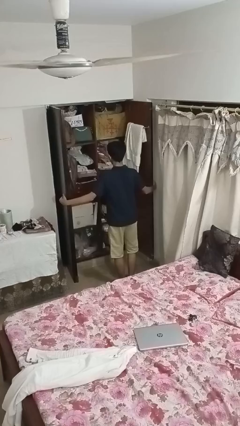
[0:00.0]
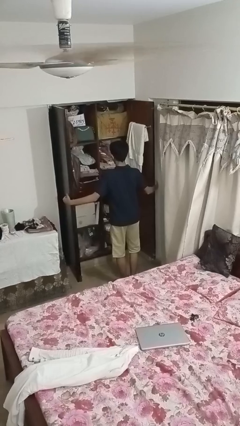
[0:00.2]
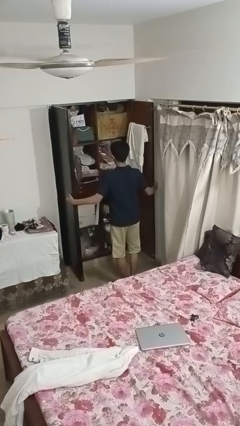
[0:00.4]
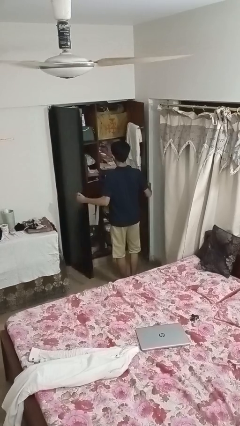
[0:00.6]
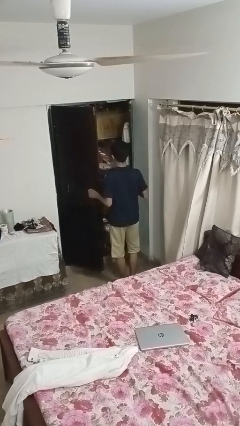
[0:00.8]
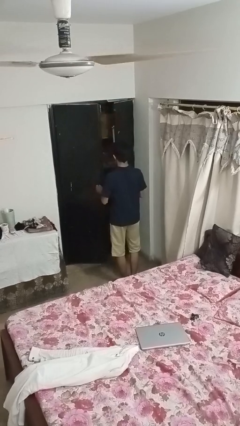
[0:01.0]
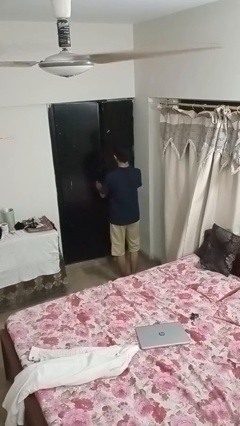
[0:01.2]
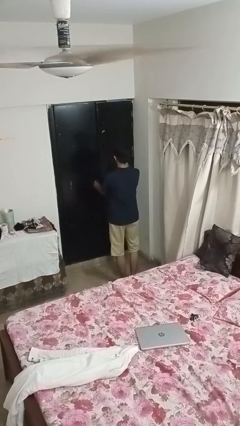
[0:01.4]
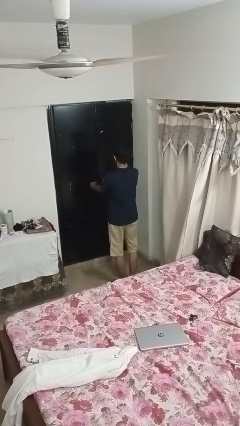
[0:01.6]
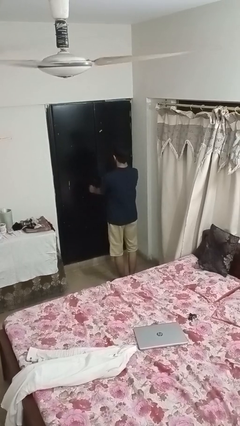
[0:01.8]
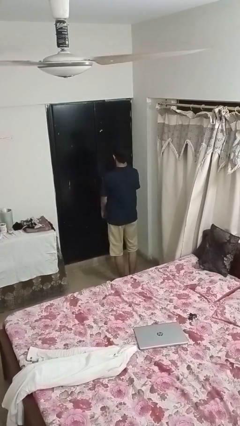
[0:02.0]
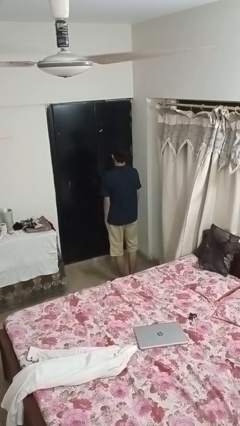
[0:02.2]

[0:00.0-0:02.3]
person closes closet door

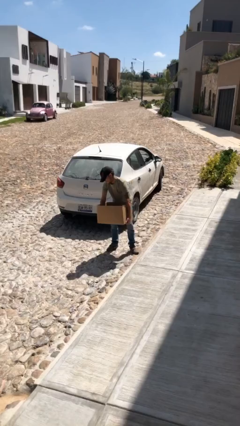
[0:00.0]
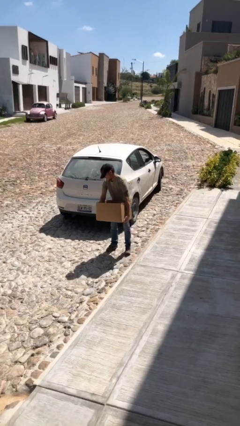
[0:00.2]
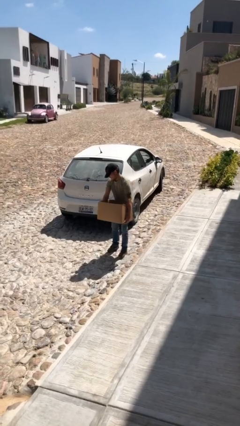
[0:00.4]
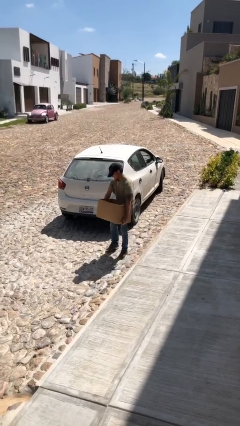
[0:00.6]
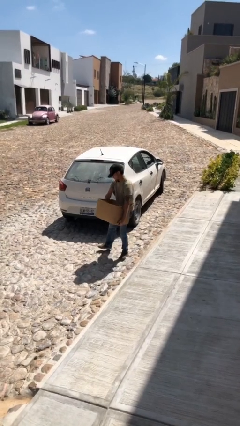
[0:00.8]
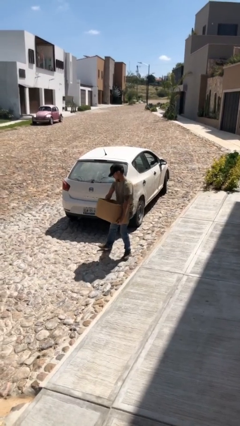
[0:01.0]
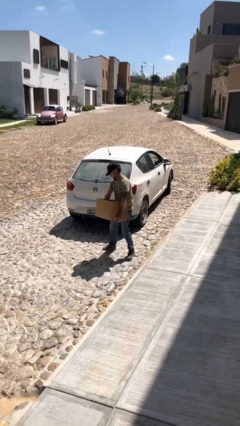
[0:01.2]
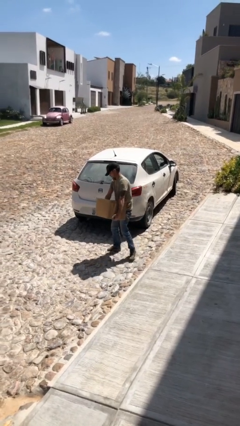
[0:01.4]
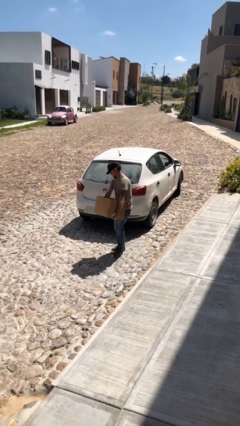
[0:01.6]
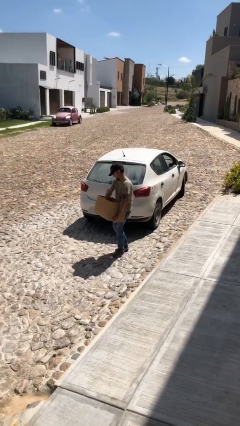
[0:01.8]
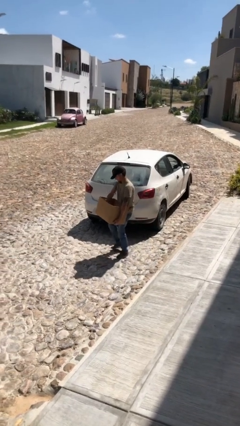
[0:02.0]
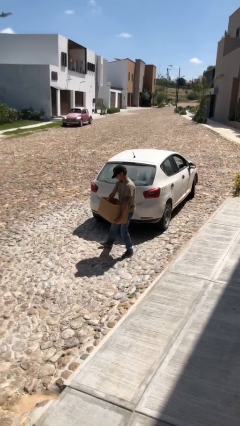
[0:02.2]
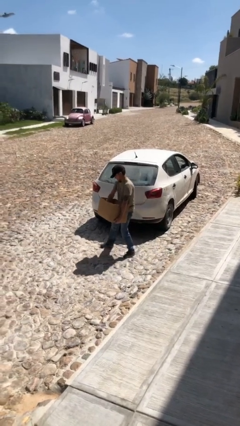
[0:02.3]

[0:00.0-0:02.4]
person carries heavy object

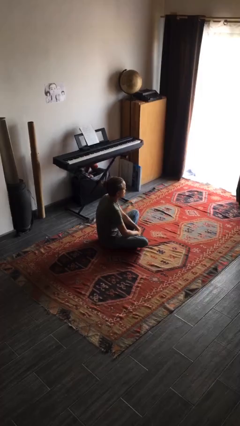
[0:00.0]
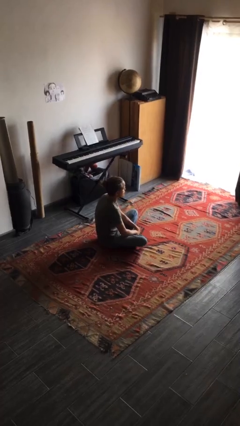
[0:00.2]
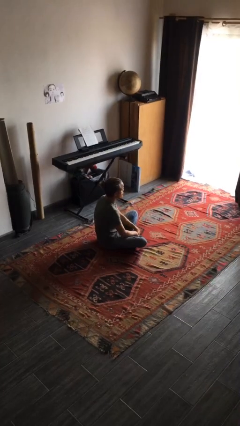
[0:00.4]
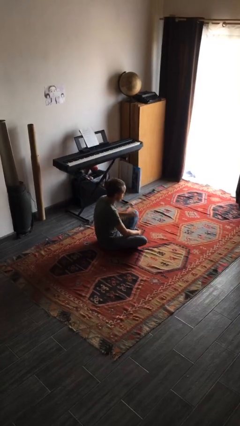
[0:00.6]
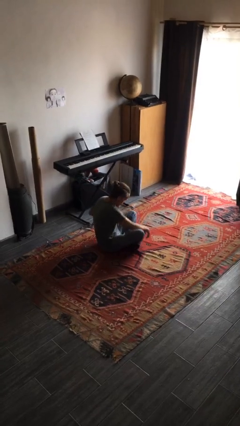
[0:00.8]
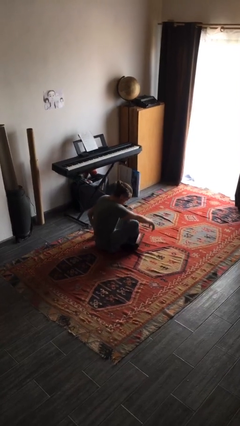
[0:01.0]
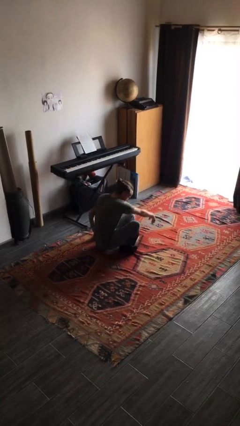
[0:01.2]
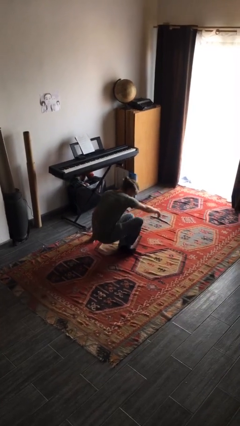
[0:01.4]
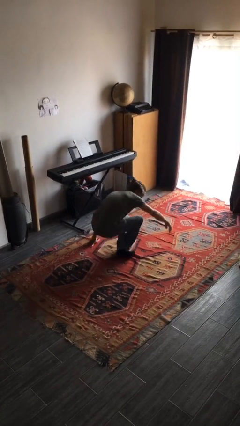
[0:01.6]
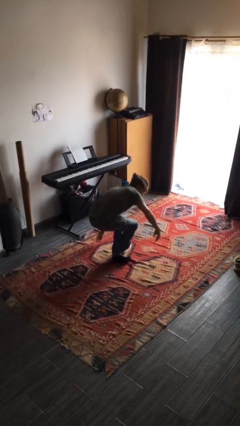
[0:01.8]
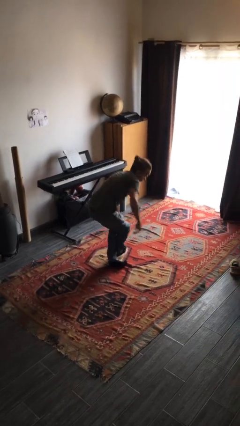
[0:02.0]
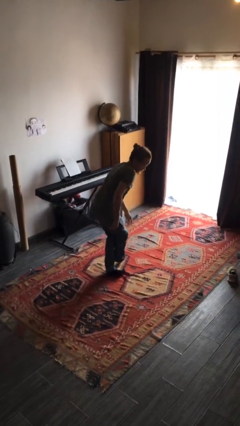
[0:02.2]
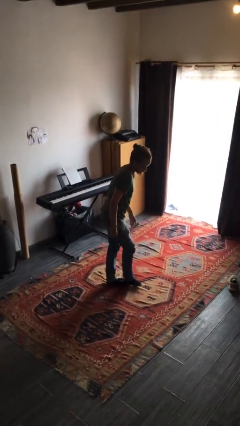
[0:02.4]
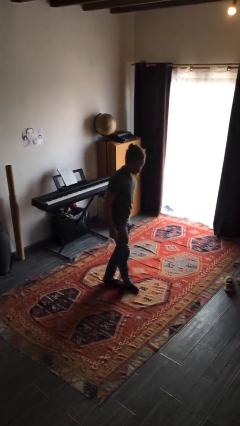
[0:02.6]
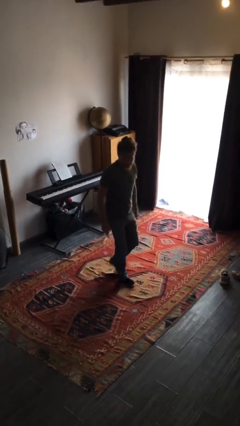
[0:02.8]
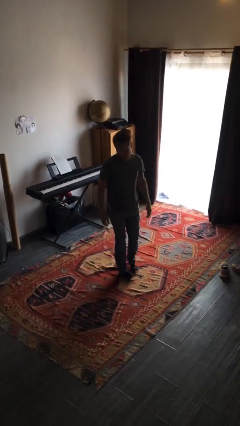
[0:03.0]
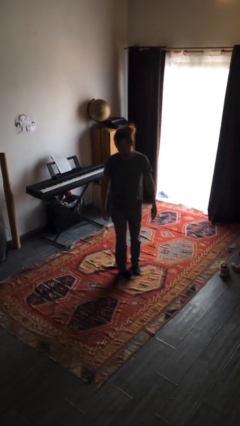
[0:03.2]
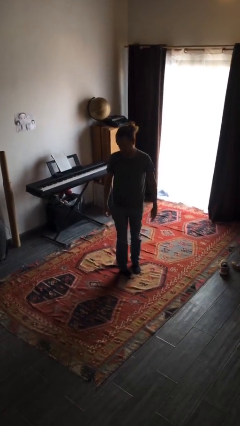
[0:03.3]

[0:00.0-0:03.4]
person stands up from floor

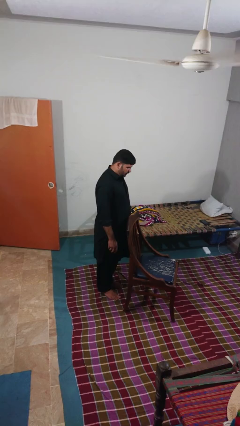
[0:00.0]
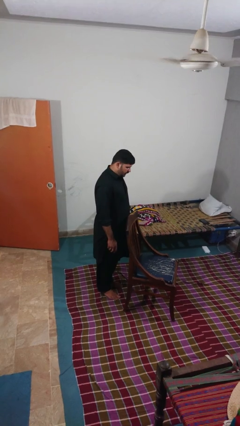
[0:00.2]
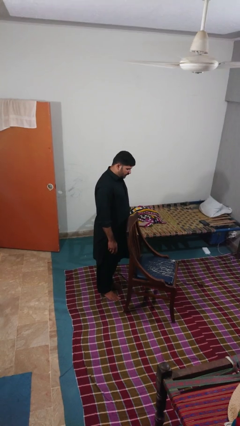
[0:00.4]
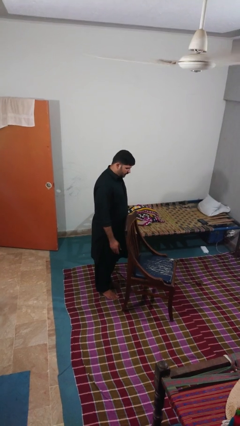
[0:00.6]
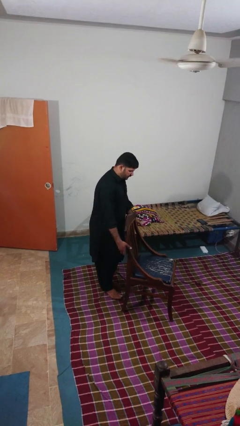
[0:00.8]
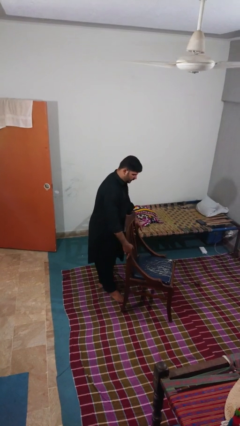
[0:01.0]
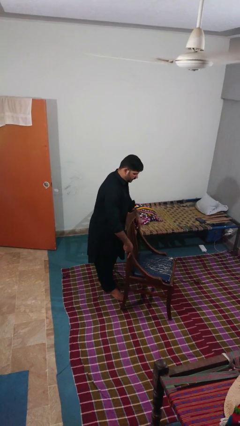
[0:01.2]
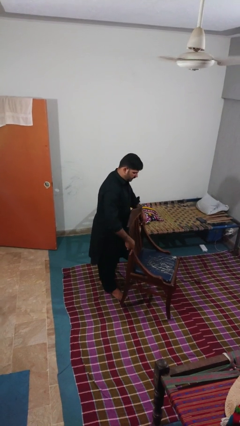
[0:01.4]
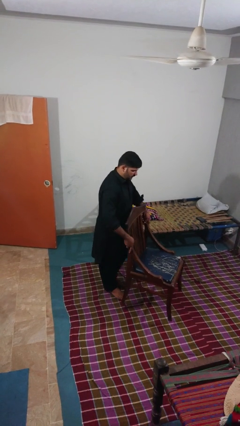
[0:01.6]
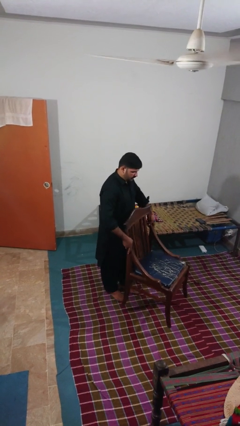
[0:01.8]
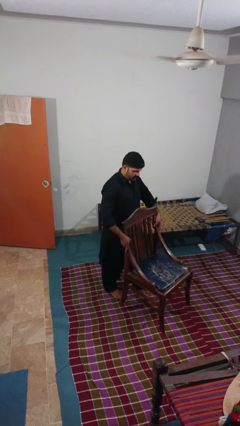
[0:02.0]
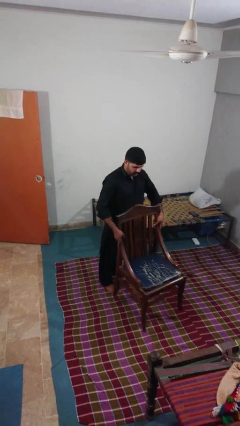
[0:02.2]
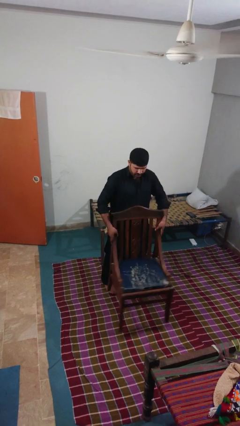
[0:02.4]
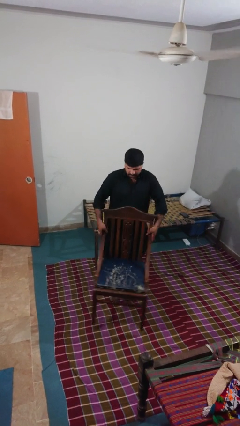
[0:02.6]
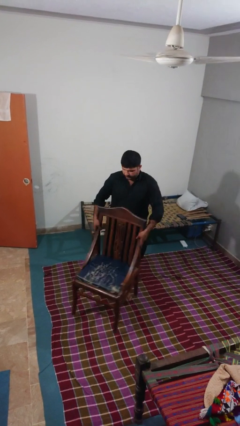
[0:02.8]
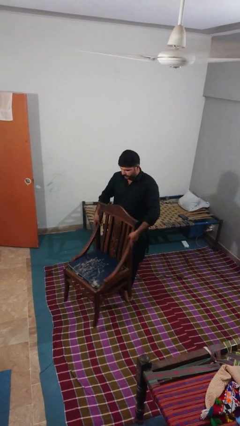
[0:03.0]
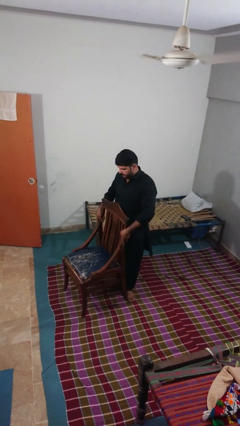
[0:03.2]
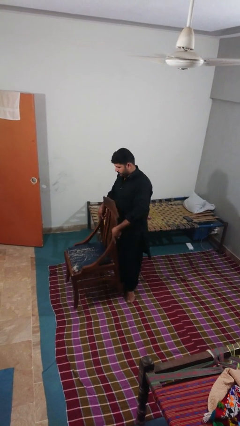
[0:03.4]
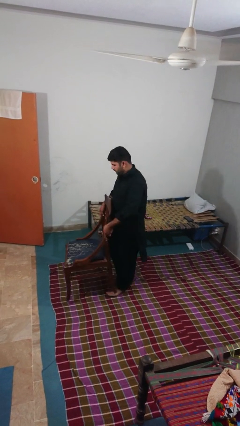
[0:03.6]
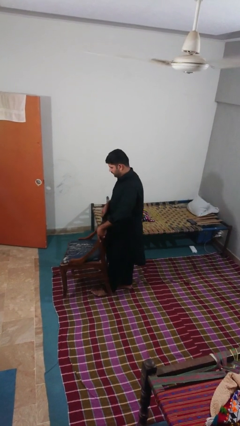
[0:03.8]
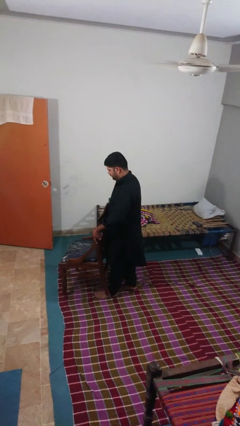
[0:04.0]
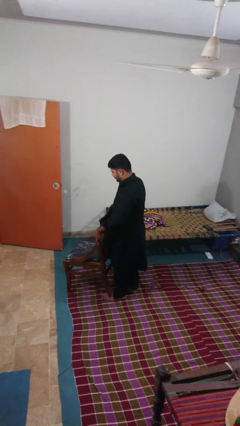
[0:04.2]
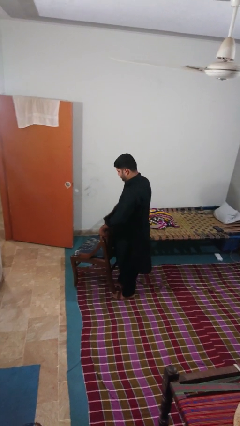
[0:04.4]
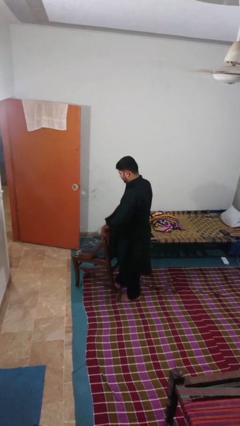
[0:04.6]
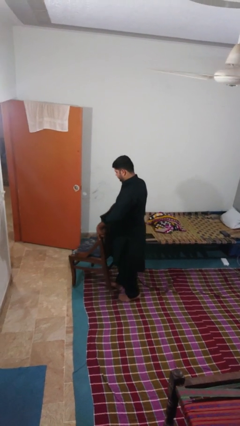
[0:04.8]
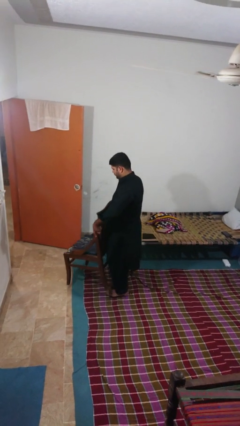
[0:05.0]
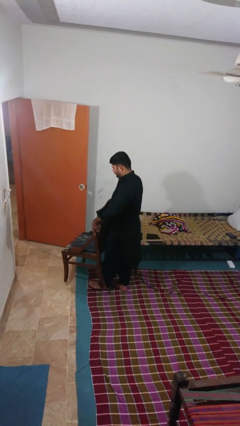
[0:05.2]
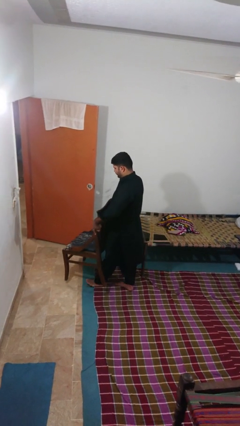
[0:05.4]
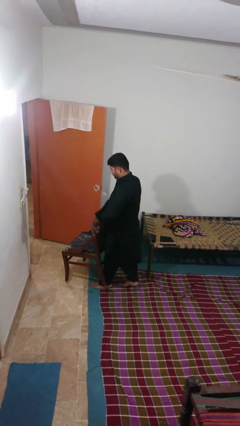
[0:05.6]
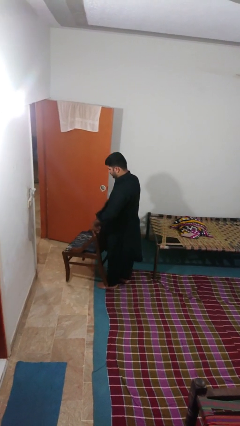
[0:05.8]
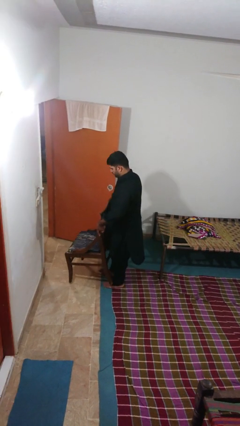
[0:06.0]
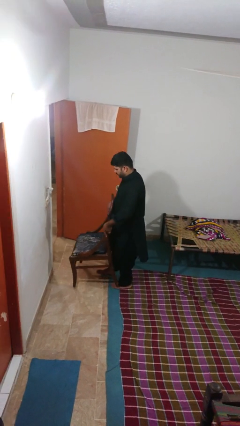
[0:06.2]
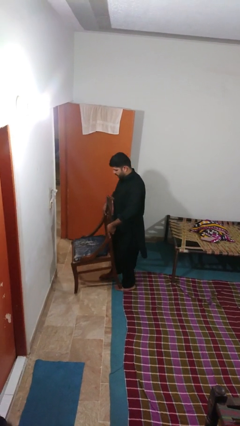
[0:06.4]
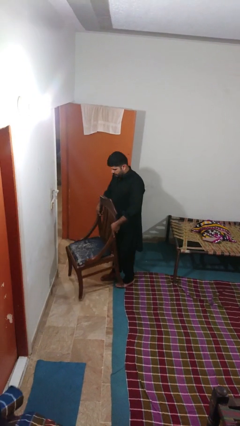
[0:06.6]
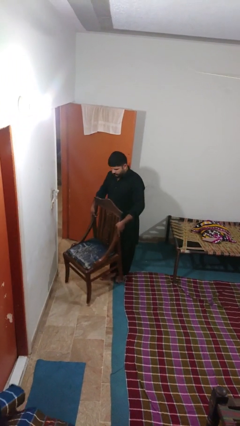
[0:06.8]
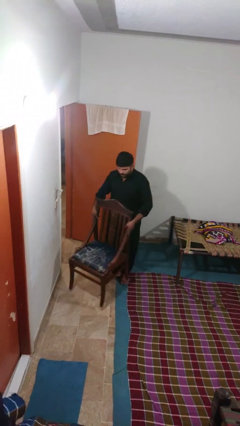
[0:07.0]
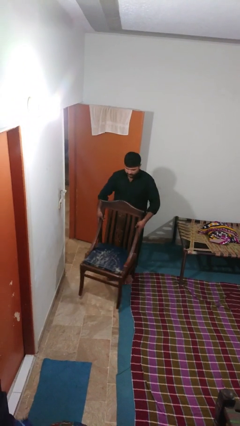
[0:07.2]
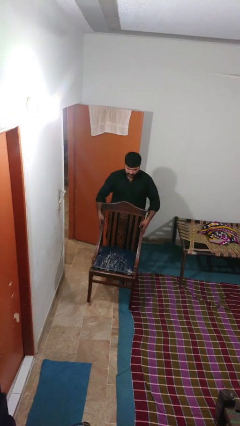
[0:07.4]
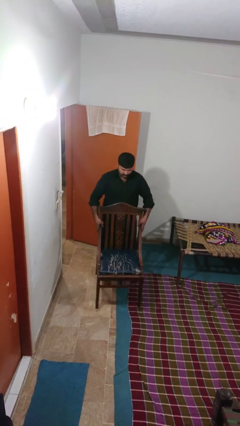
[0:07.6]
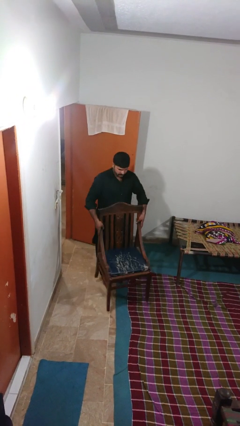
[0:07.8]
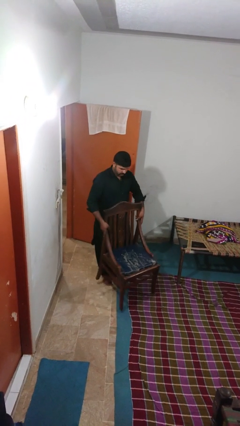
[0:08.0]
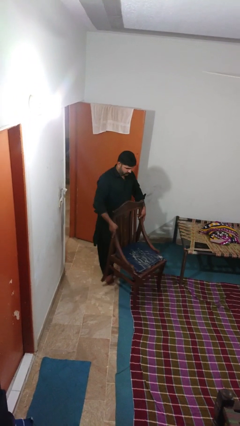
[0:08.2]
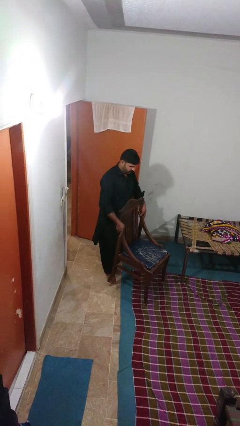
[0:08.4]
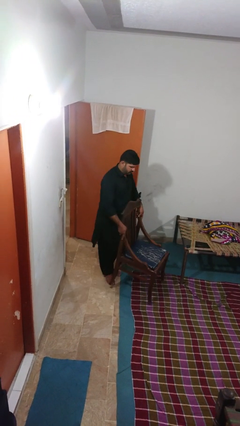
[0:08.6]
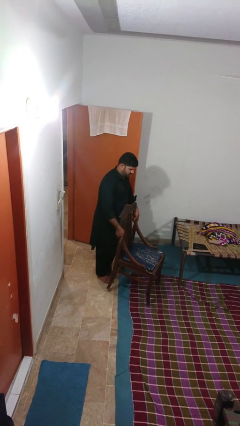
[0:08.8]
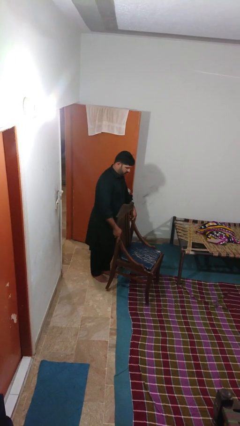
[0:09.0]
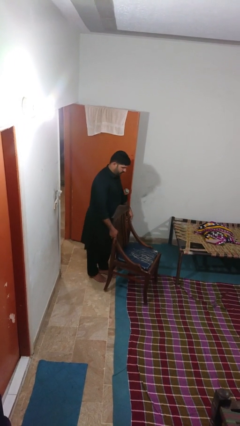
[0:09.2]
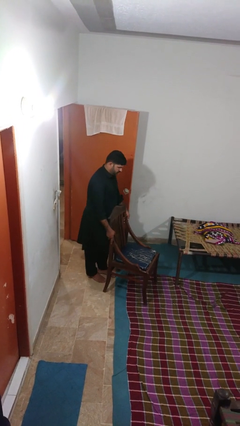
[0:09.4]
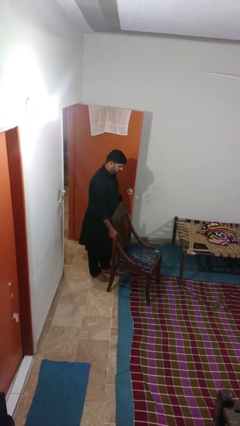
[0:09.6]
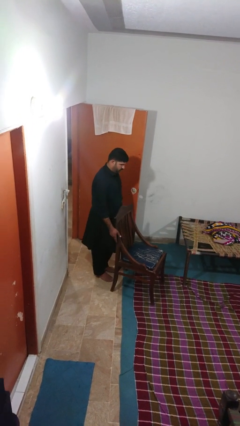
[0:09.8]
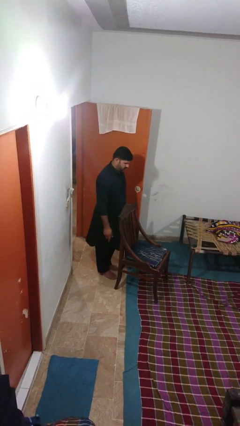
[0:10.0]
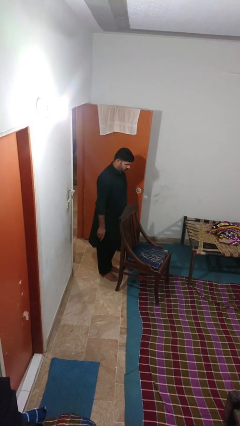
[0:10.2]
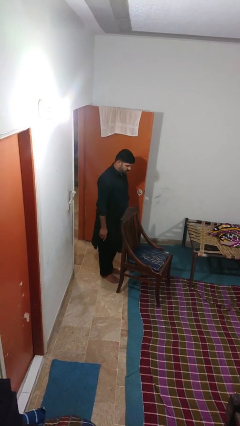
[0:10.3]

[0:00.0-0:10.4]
person carries furniture
